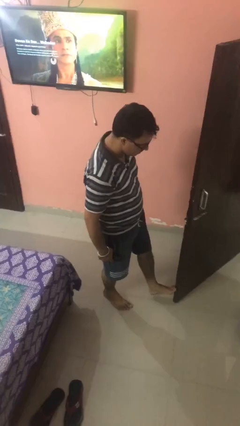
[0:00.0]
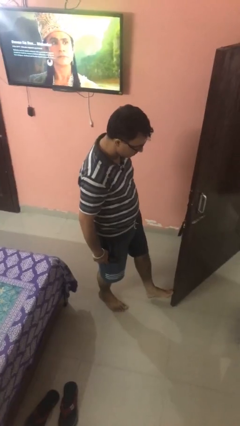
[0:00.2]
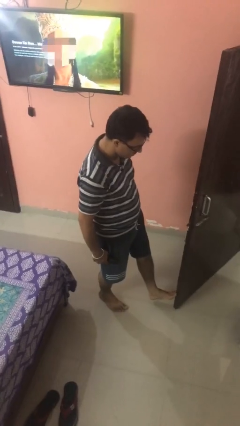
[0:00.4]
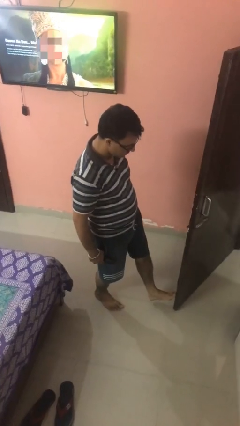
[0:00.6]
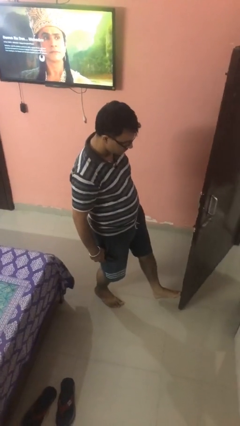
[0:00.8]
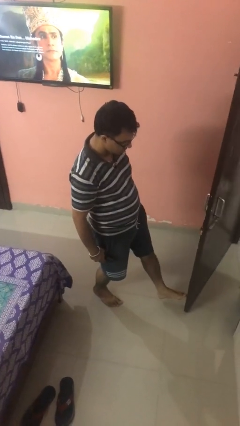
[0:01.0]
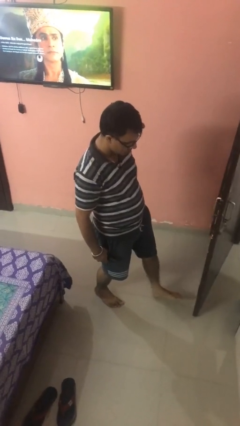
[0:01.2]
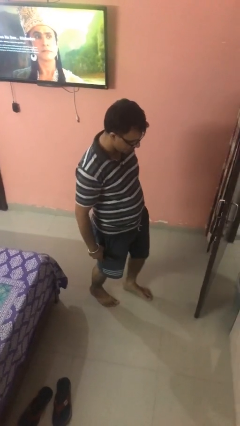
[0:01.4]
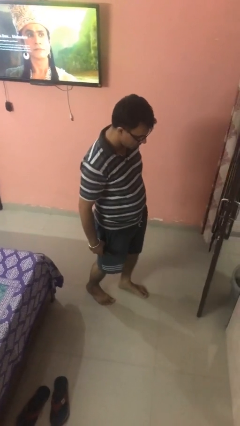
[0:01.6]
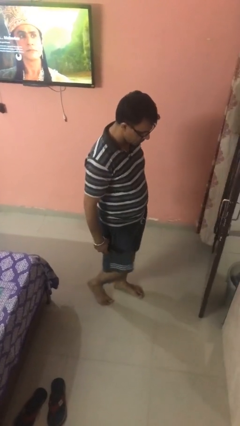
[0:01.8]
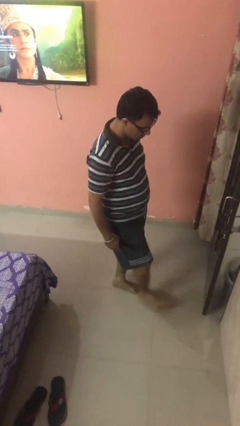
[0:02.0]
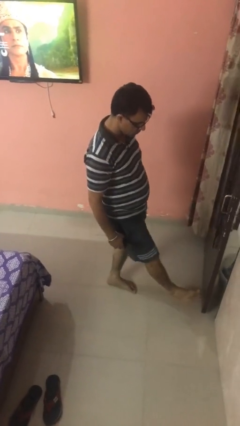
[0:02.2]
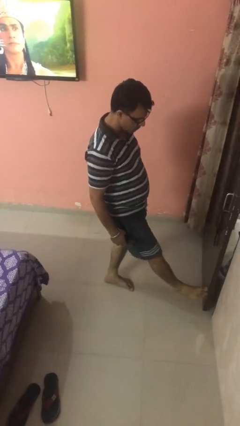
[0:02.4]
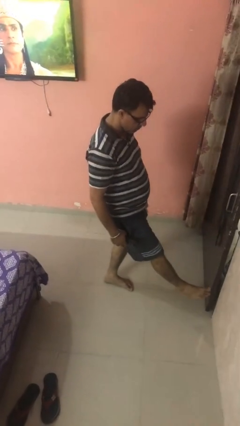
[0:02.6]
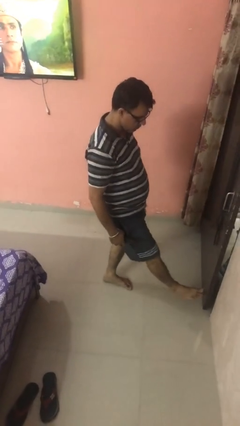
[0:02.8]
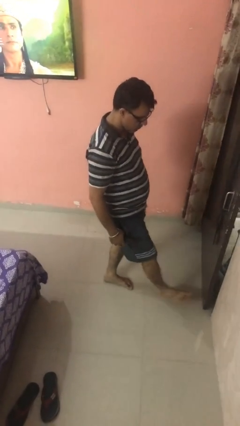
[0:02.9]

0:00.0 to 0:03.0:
person closes door with foot

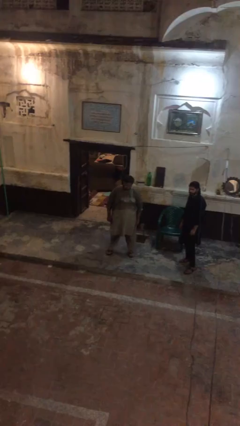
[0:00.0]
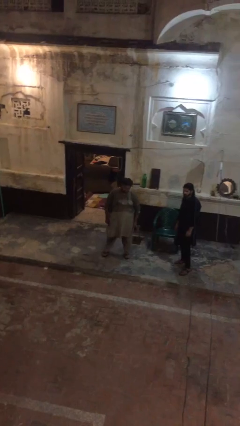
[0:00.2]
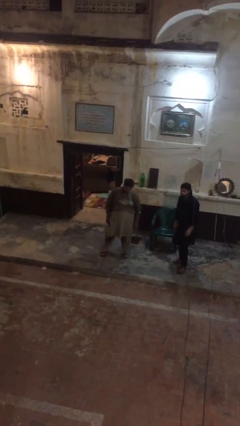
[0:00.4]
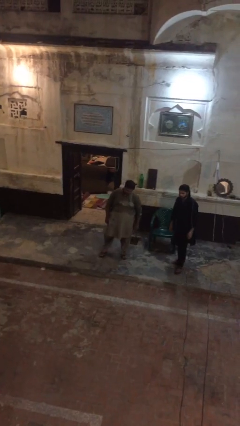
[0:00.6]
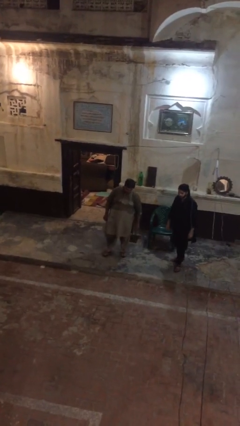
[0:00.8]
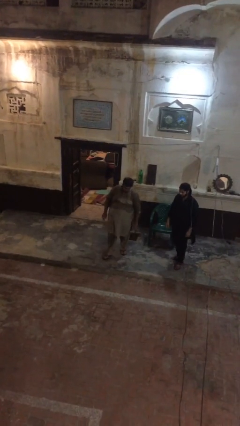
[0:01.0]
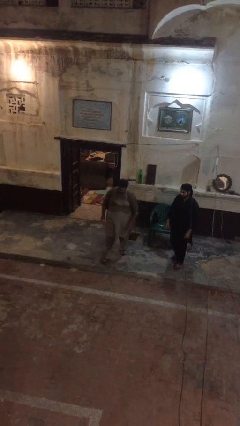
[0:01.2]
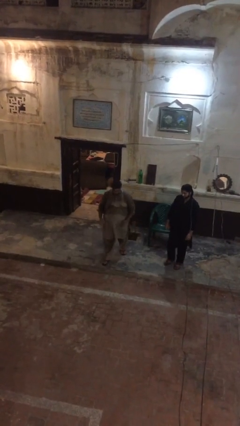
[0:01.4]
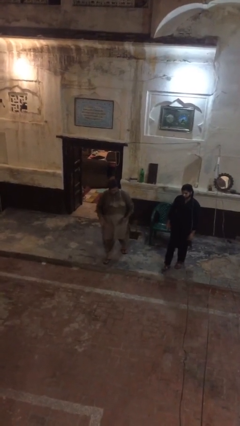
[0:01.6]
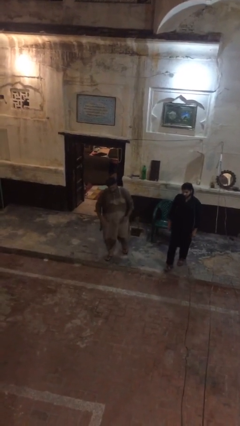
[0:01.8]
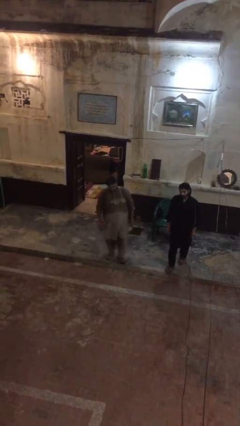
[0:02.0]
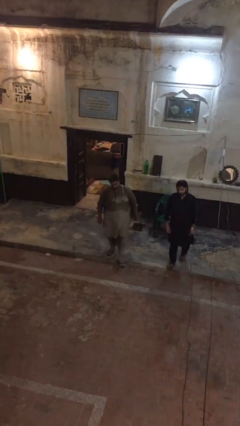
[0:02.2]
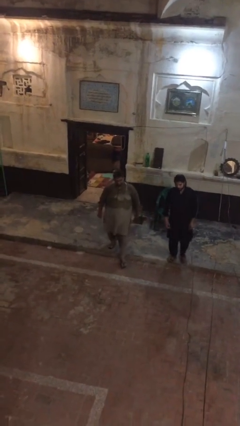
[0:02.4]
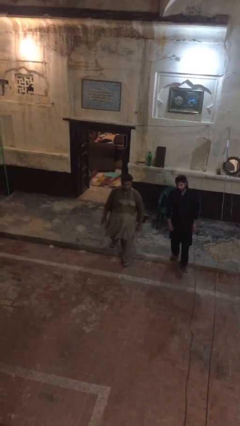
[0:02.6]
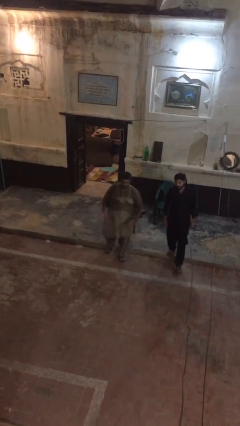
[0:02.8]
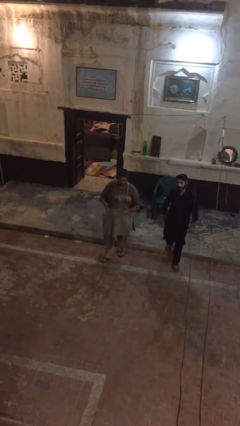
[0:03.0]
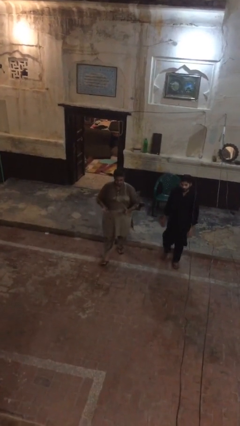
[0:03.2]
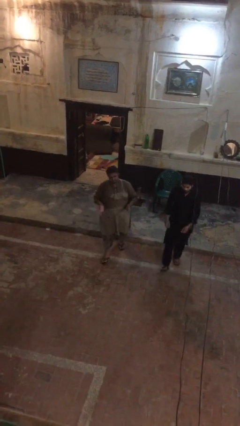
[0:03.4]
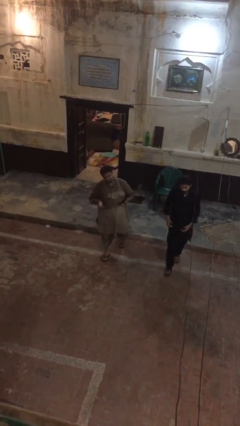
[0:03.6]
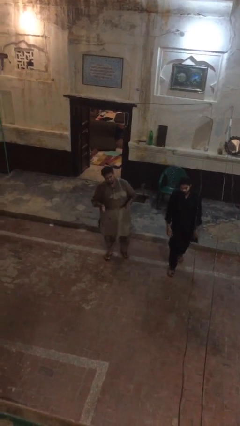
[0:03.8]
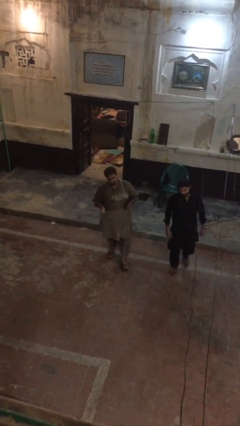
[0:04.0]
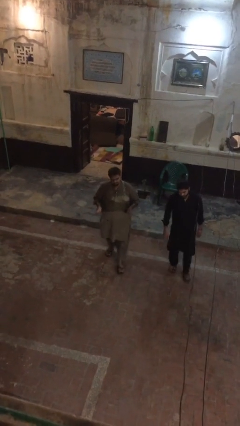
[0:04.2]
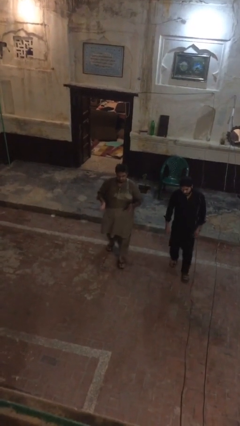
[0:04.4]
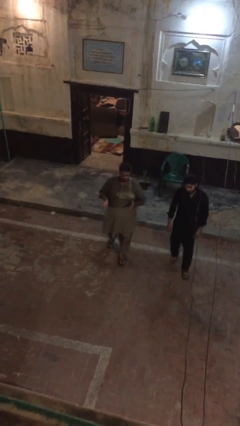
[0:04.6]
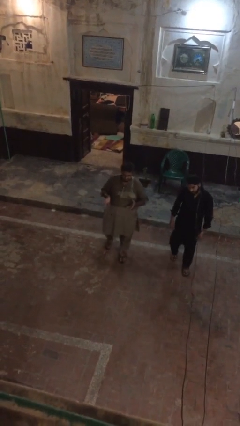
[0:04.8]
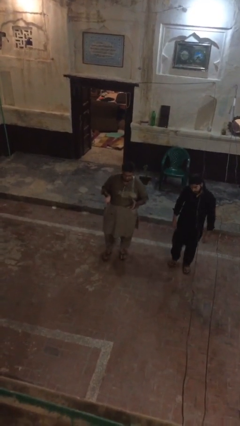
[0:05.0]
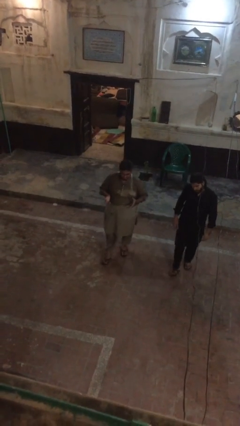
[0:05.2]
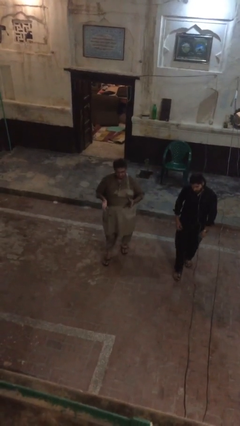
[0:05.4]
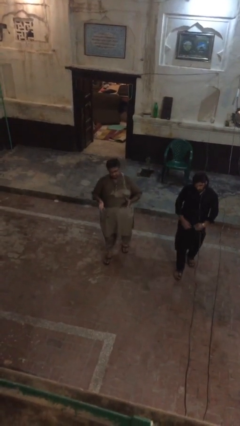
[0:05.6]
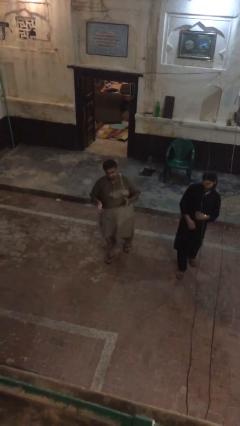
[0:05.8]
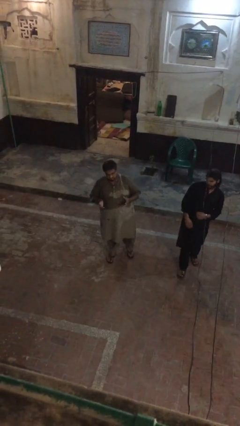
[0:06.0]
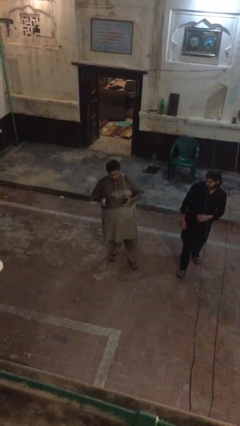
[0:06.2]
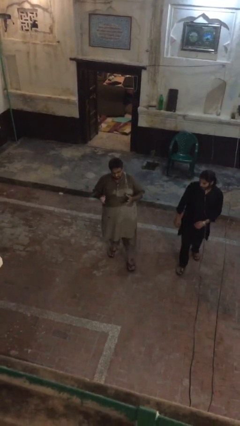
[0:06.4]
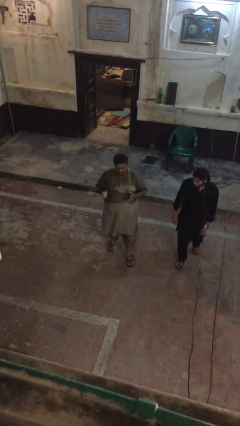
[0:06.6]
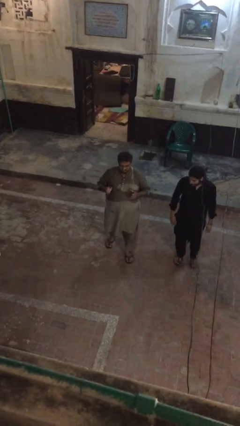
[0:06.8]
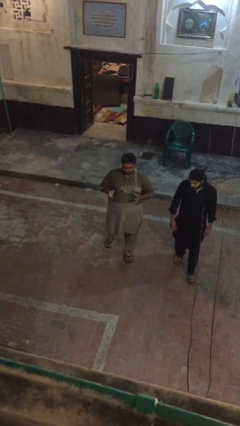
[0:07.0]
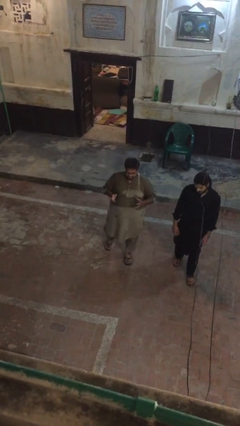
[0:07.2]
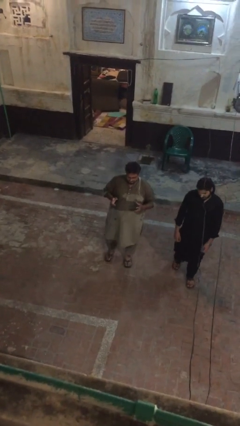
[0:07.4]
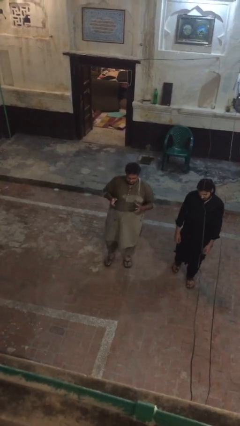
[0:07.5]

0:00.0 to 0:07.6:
person talks to person

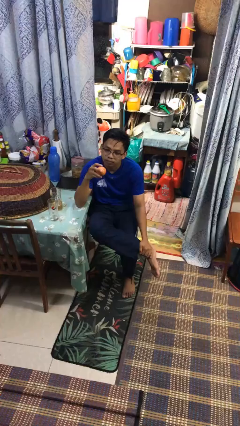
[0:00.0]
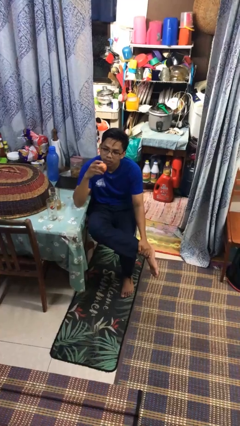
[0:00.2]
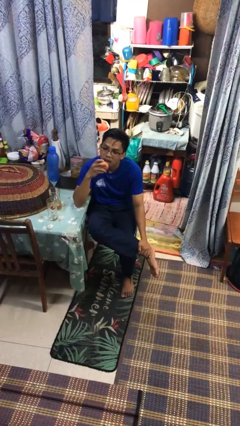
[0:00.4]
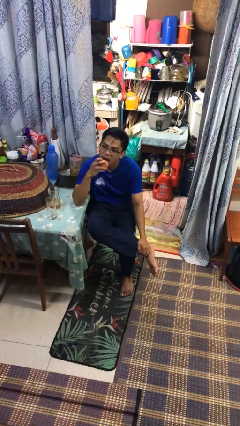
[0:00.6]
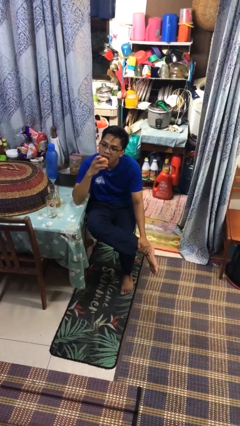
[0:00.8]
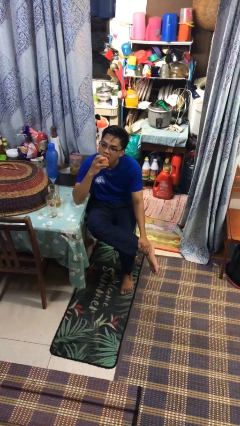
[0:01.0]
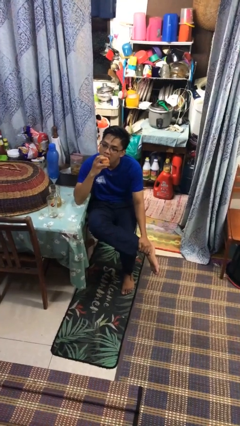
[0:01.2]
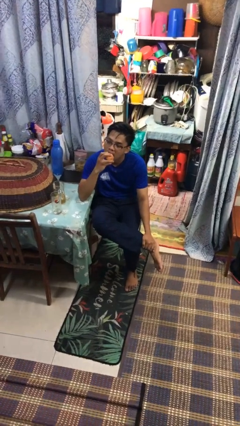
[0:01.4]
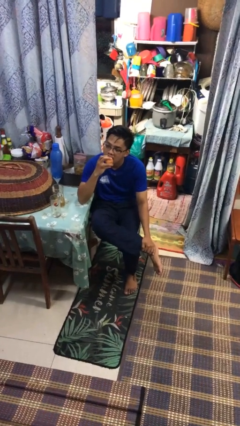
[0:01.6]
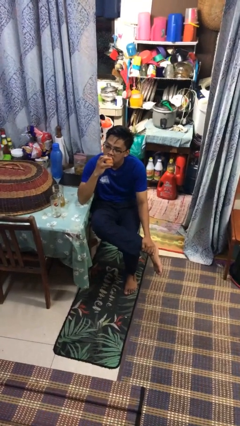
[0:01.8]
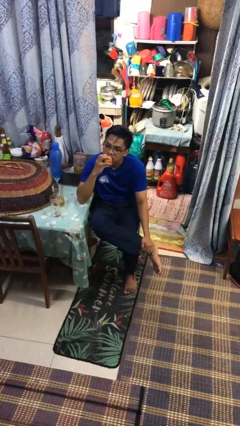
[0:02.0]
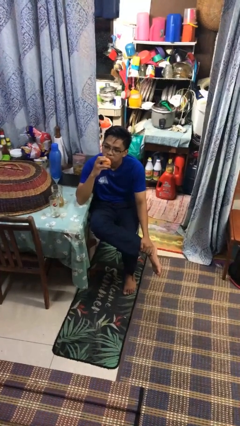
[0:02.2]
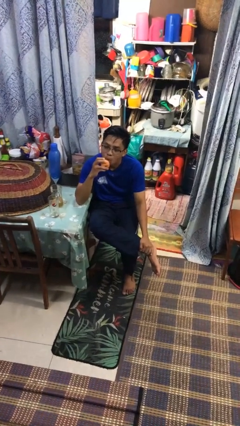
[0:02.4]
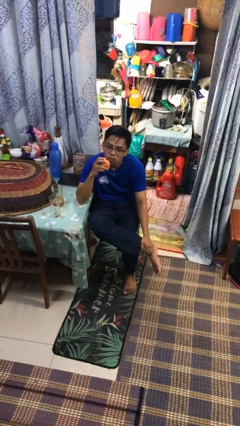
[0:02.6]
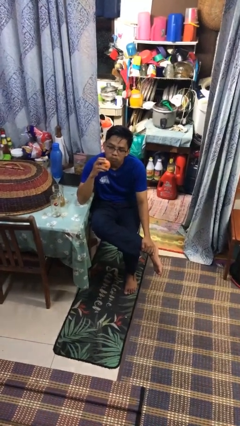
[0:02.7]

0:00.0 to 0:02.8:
person eats apple

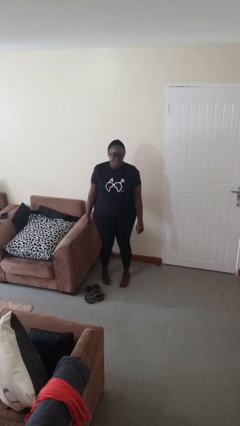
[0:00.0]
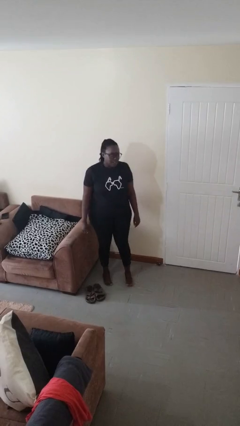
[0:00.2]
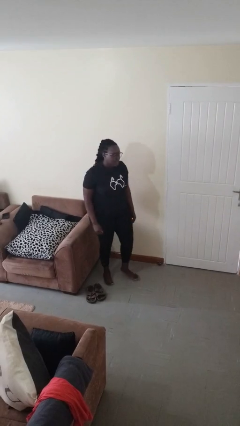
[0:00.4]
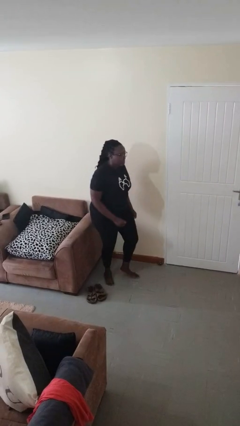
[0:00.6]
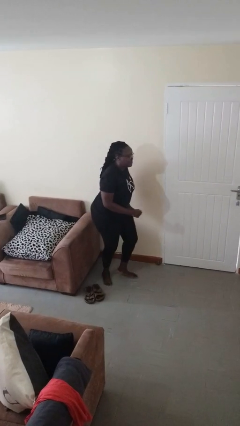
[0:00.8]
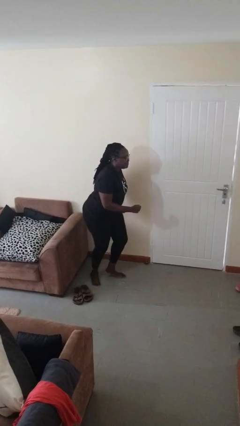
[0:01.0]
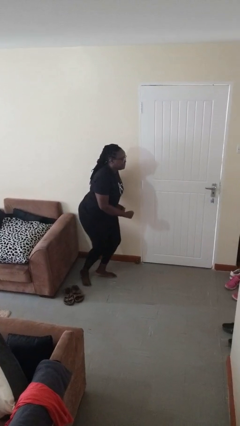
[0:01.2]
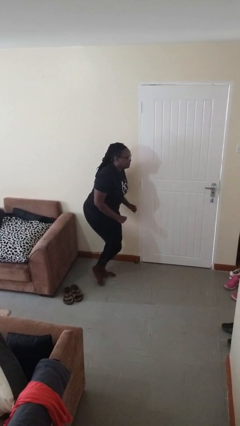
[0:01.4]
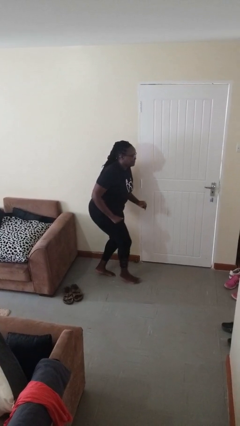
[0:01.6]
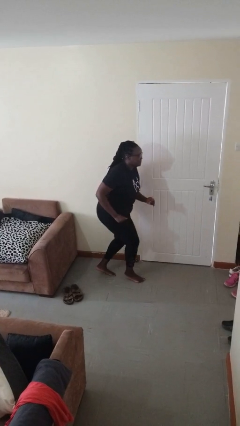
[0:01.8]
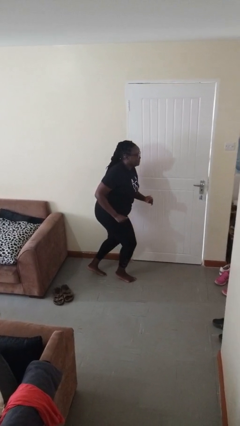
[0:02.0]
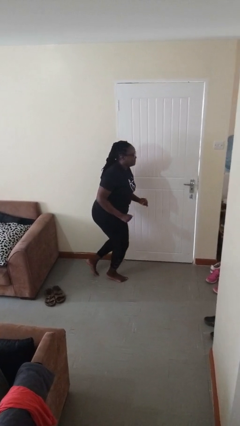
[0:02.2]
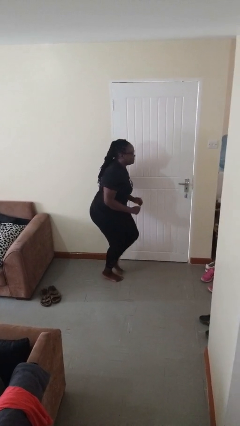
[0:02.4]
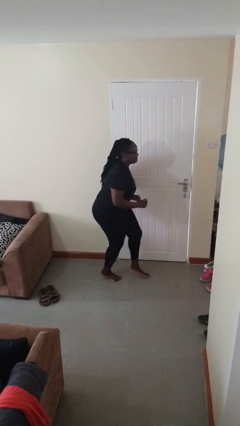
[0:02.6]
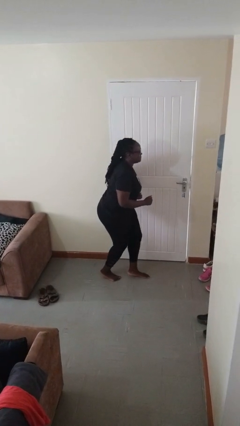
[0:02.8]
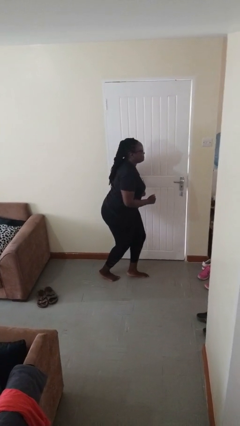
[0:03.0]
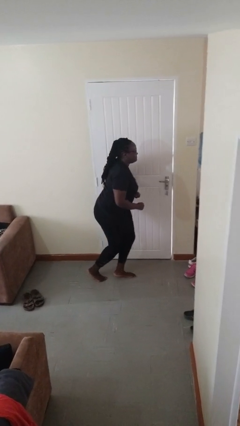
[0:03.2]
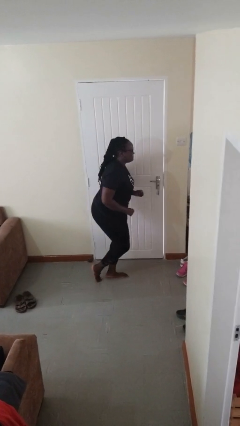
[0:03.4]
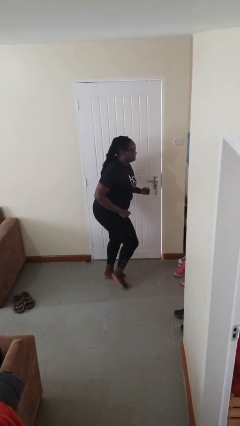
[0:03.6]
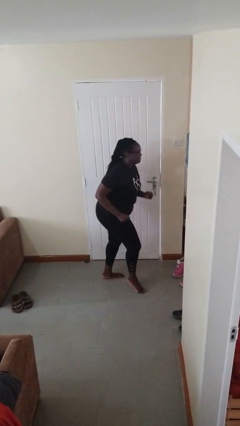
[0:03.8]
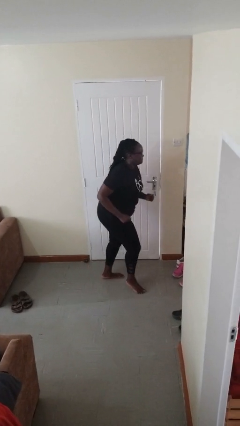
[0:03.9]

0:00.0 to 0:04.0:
person walks tiptoe

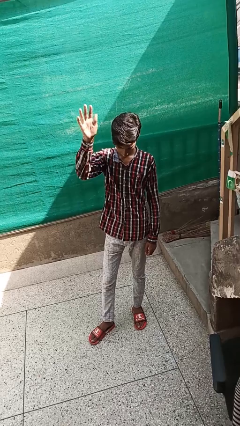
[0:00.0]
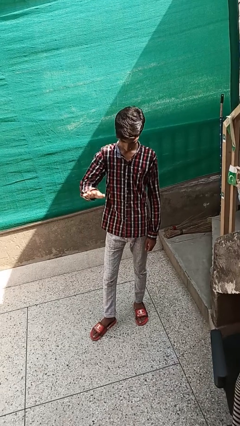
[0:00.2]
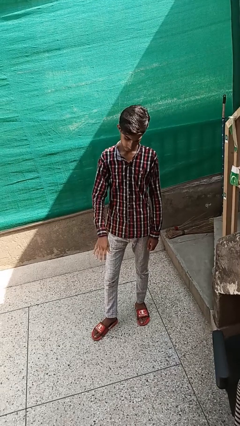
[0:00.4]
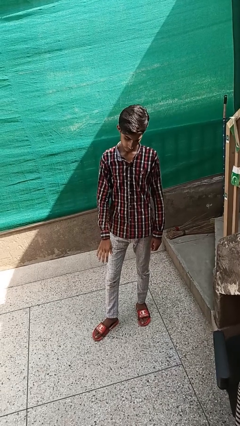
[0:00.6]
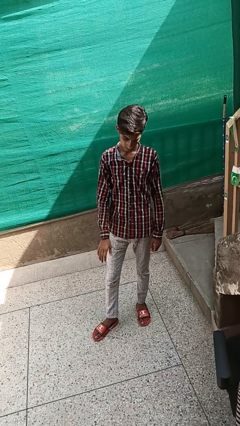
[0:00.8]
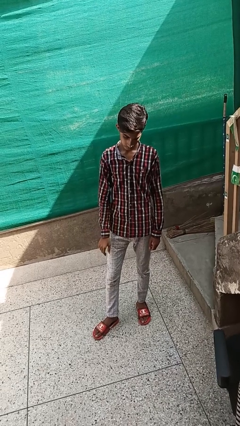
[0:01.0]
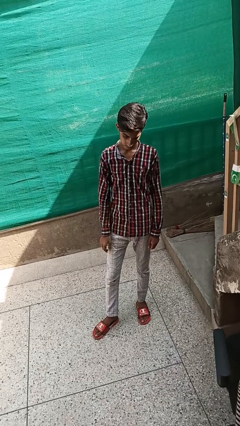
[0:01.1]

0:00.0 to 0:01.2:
person gestures swipe down
